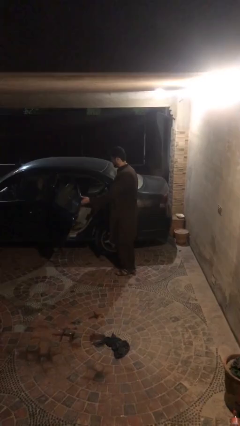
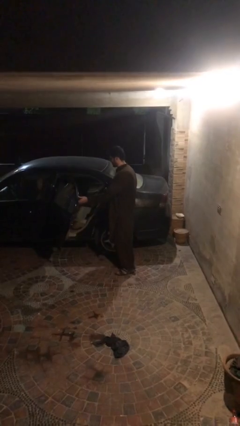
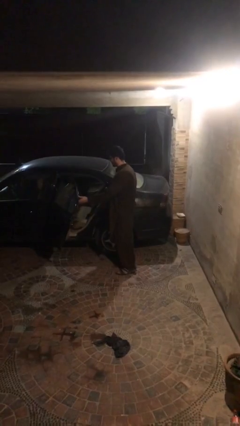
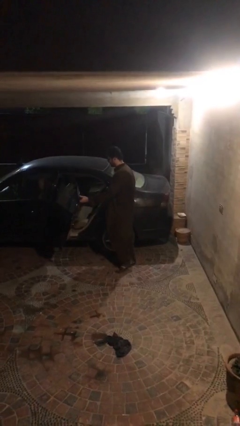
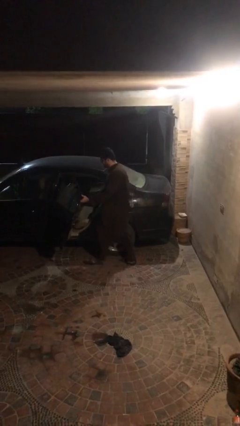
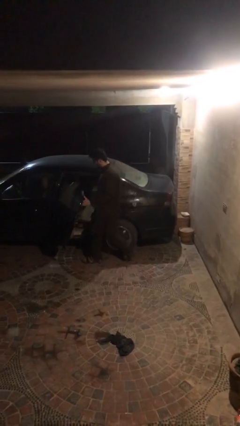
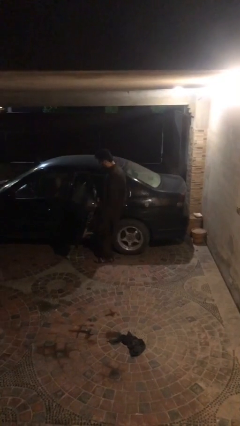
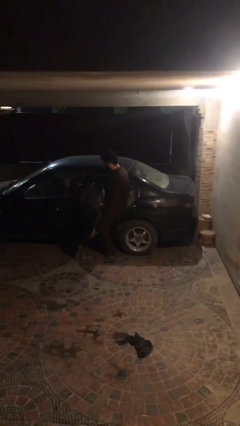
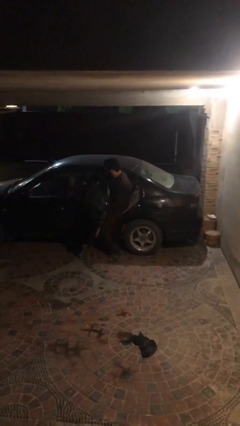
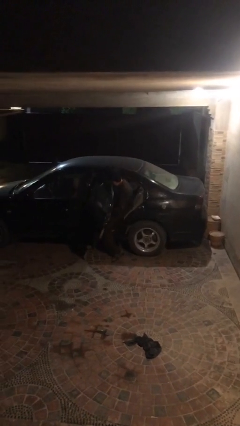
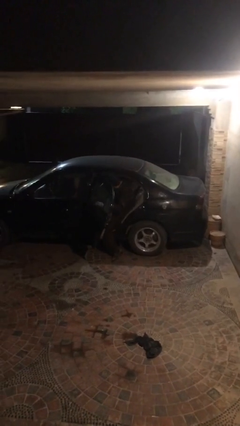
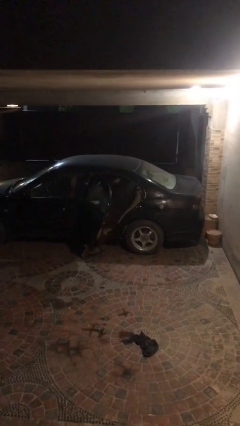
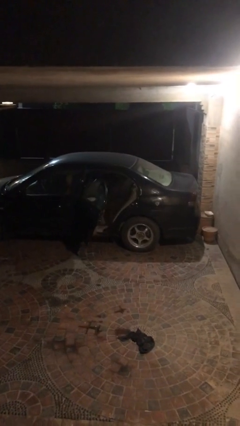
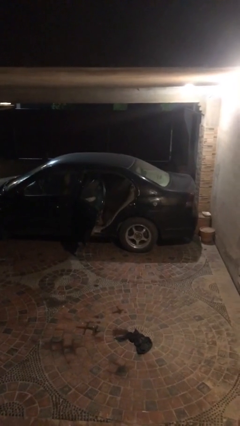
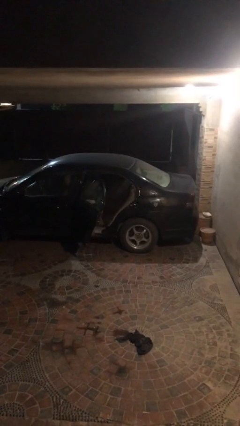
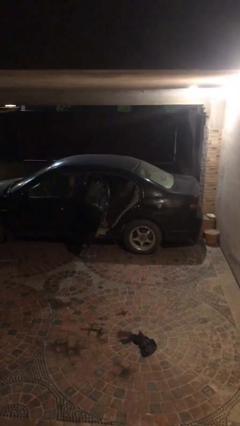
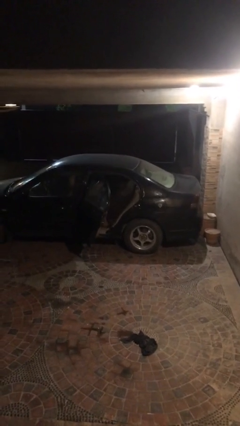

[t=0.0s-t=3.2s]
person enters car

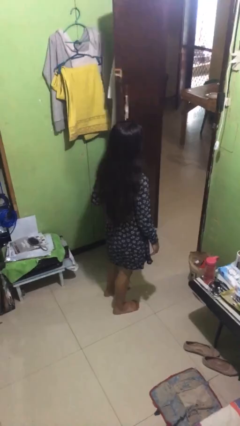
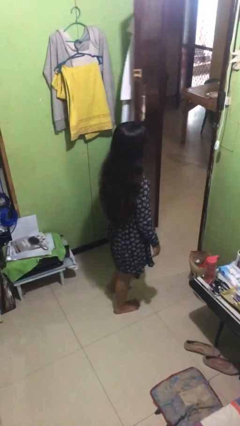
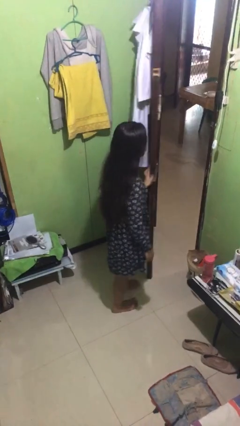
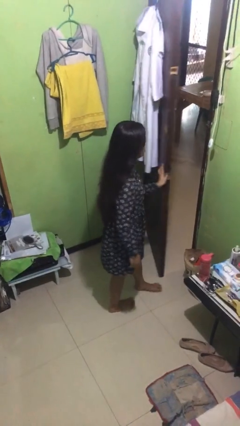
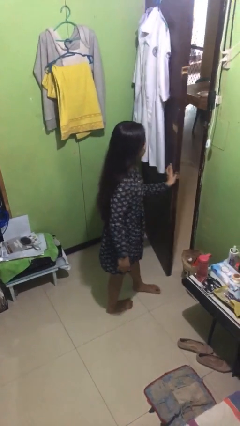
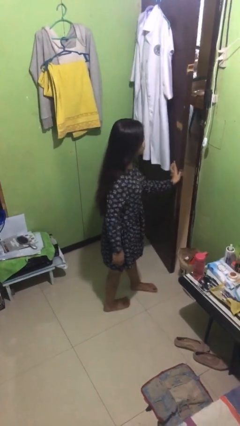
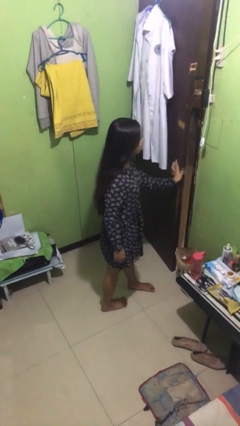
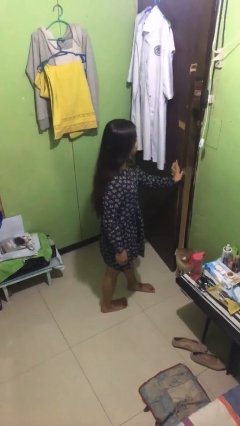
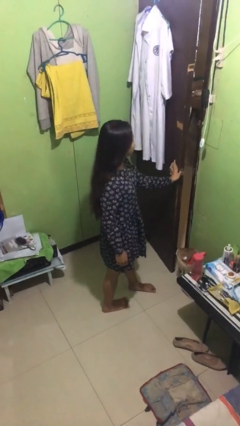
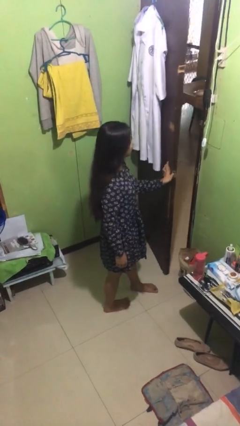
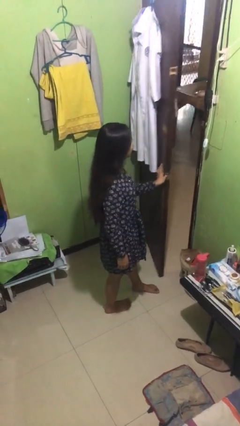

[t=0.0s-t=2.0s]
person closes facility door

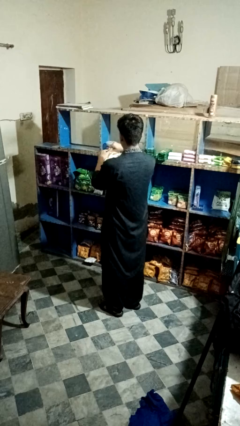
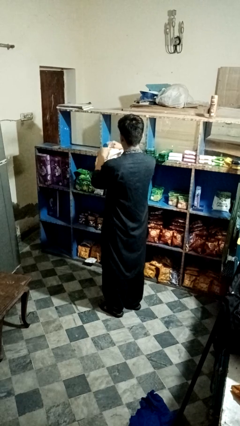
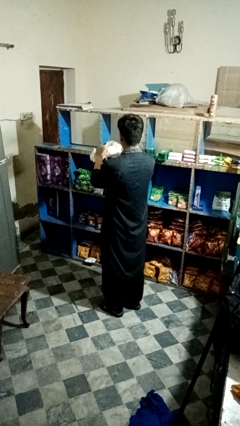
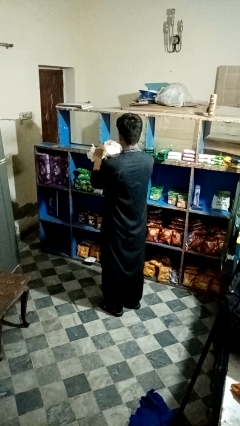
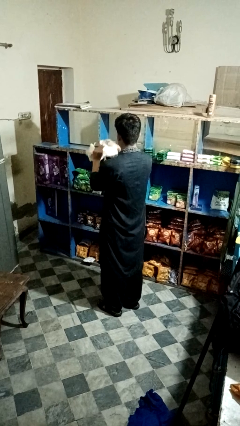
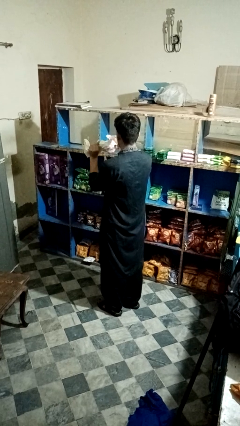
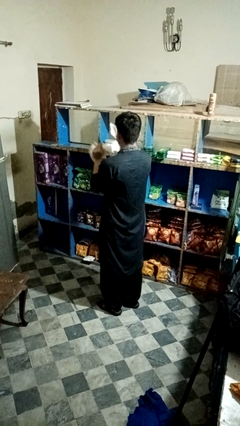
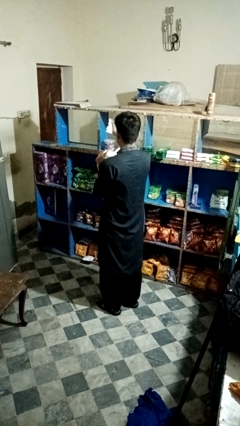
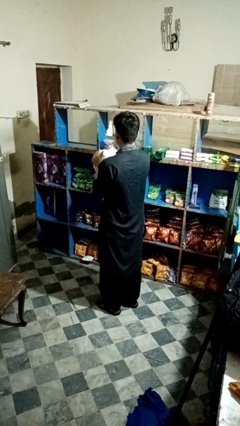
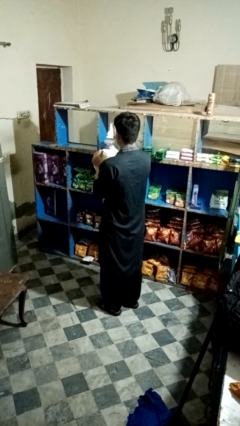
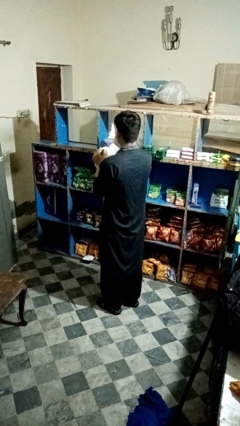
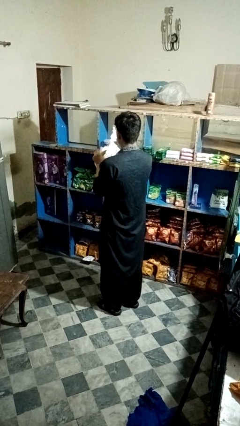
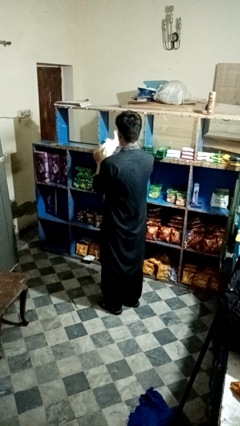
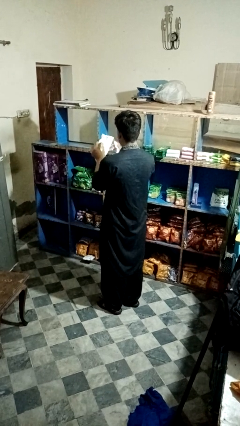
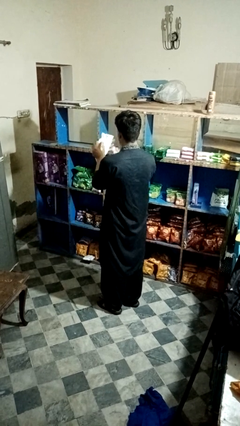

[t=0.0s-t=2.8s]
person tears paper

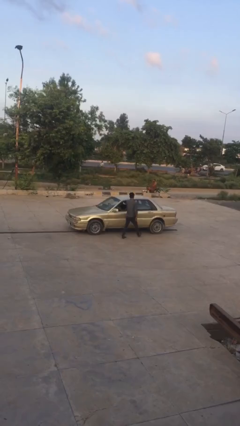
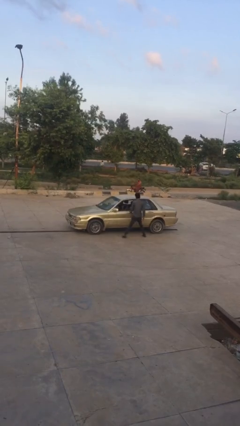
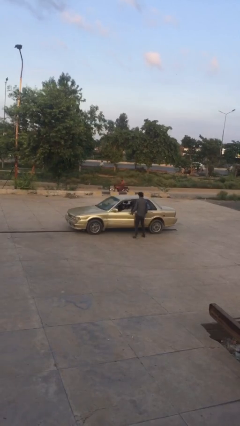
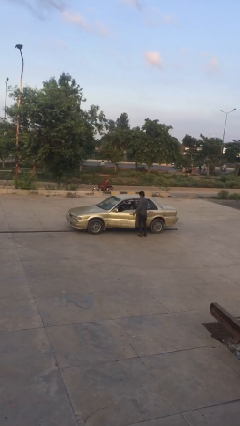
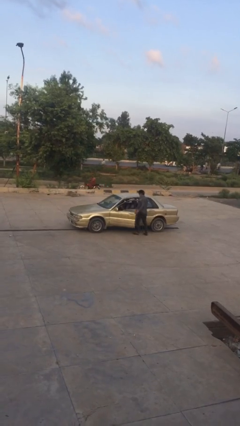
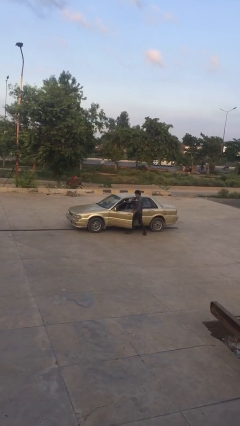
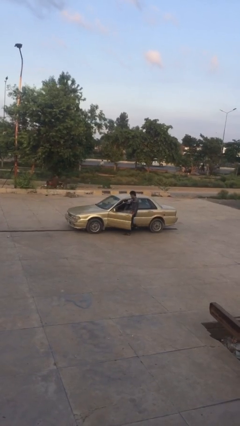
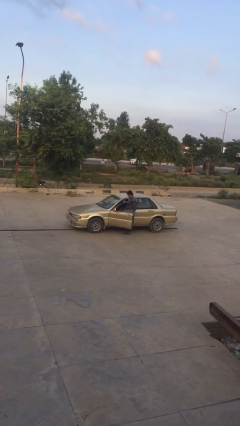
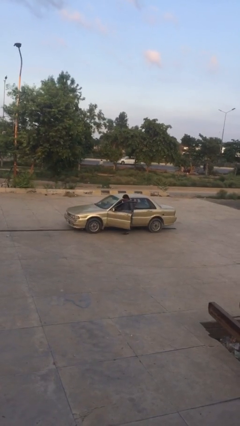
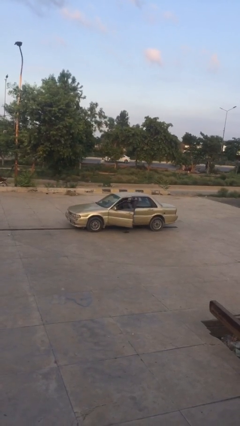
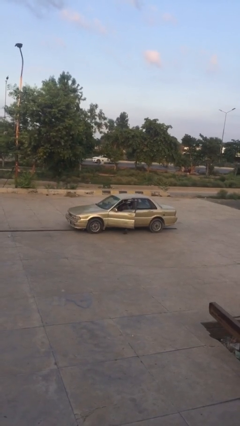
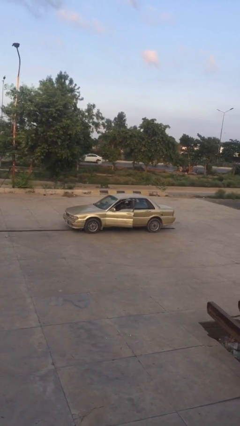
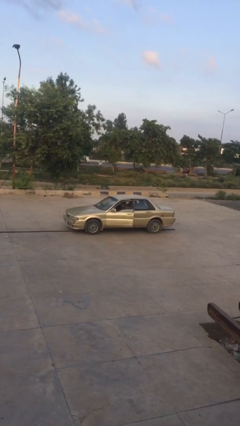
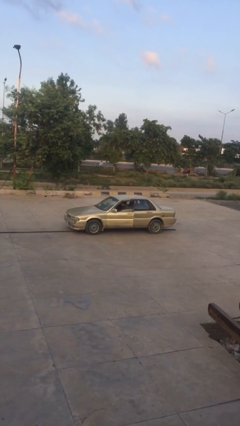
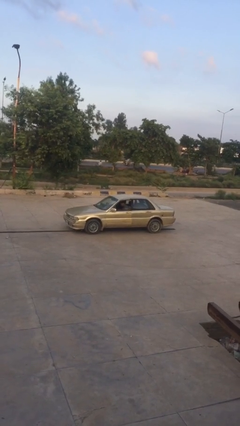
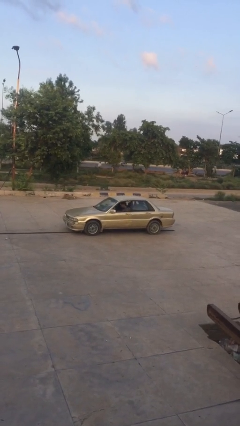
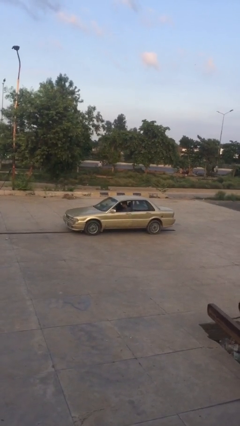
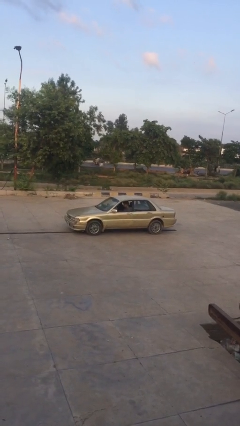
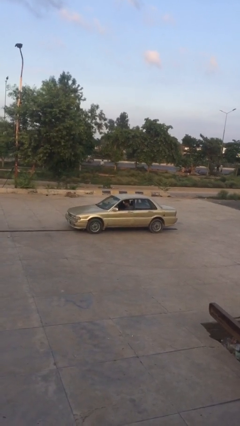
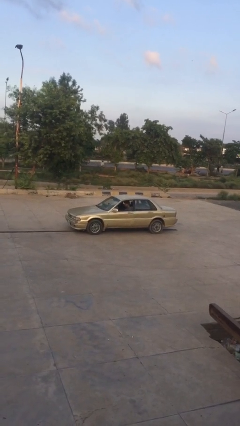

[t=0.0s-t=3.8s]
car picks up person

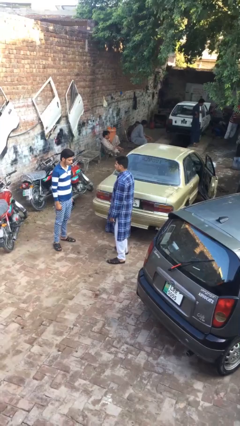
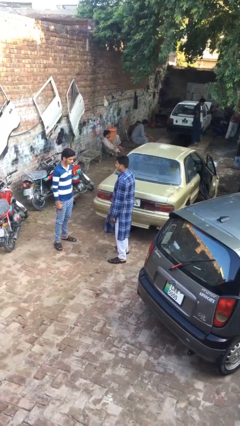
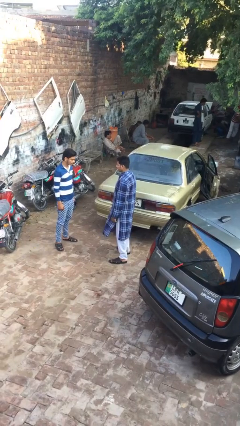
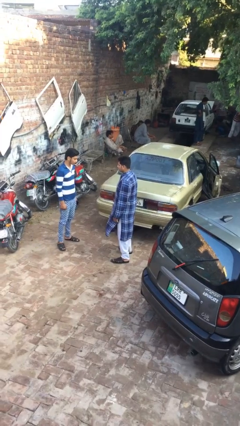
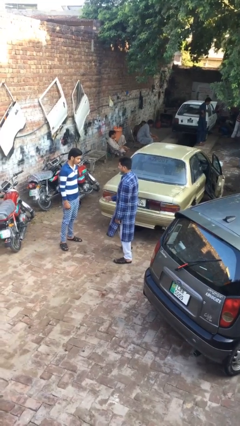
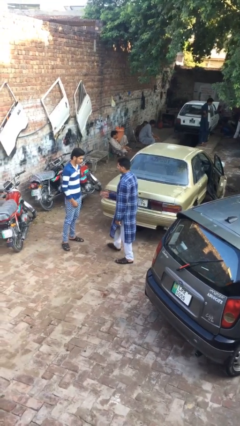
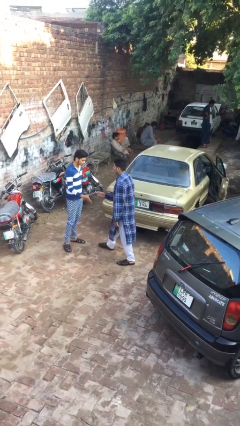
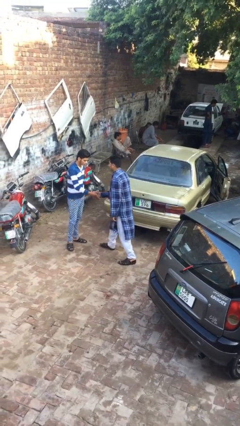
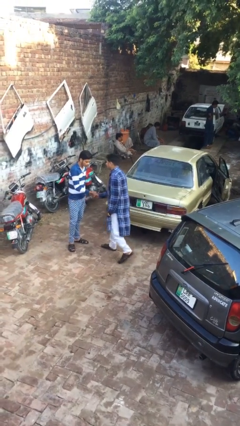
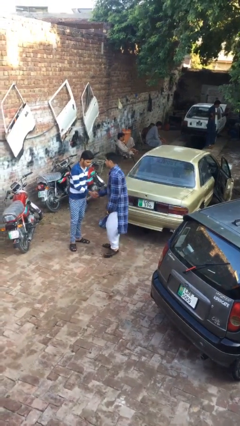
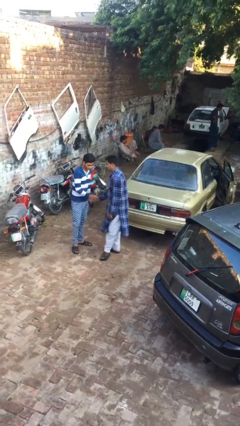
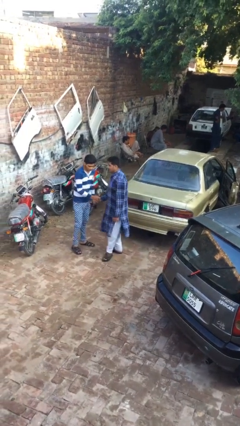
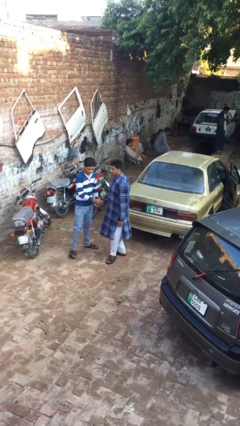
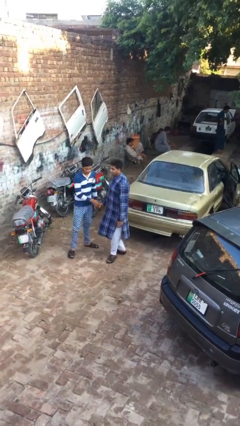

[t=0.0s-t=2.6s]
person shakes hand

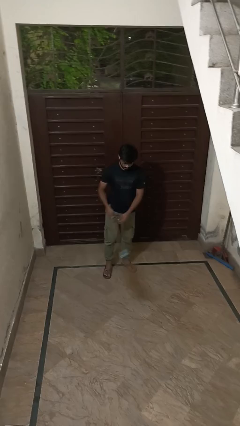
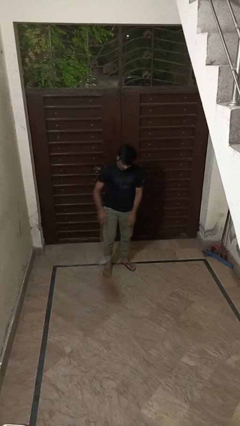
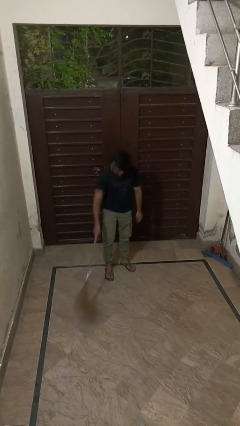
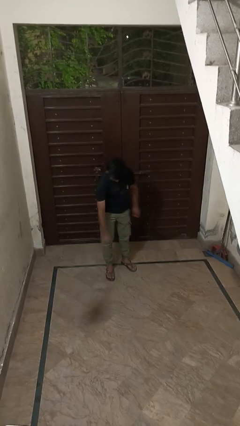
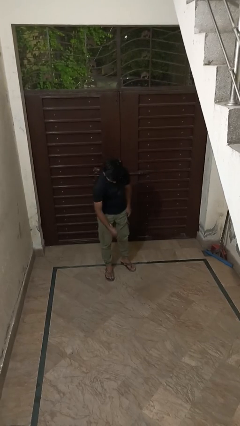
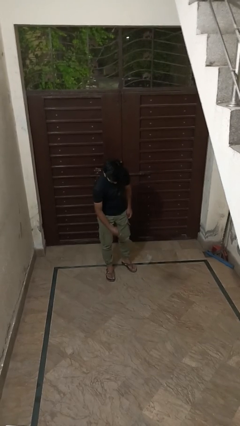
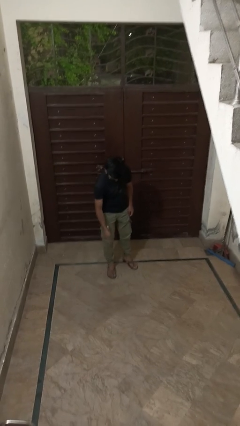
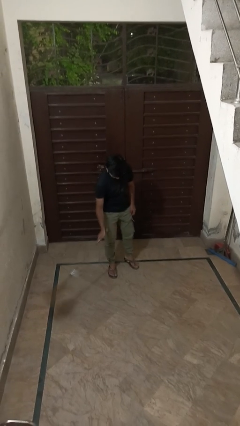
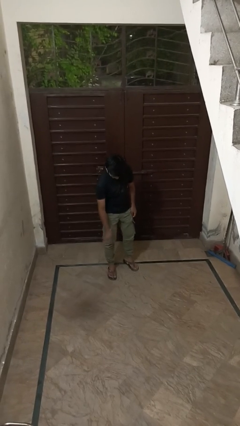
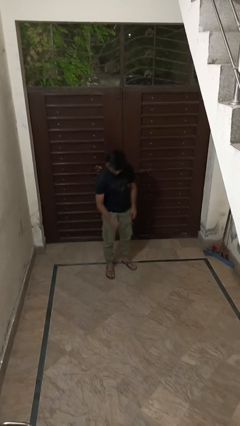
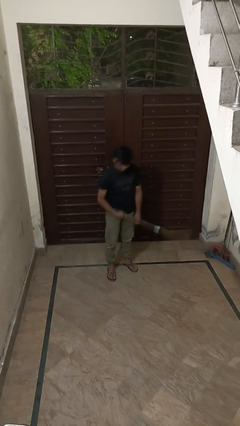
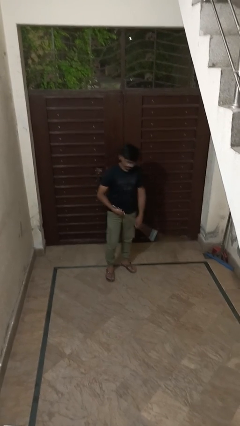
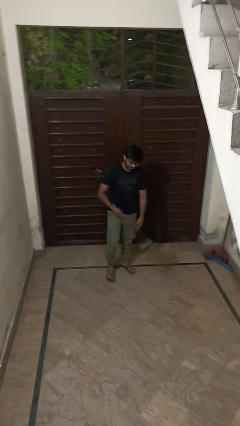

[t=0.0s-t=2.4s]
person sweeps floor

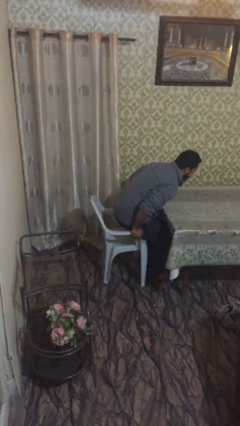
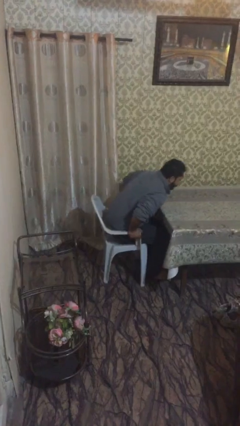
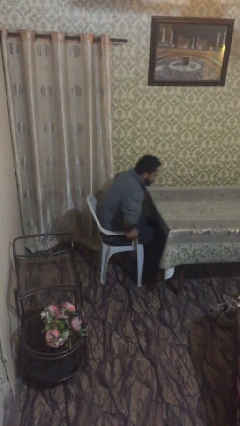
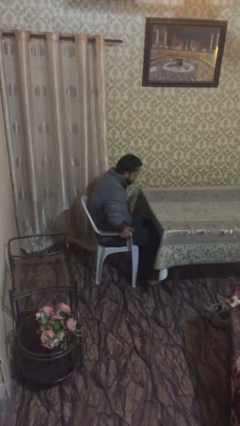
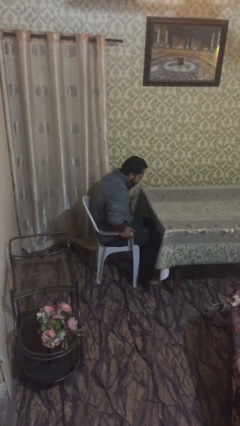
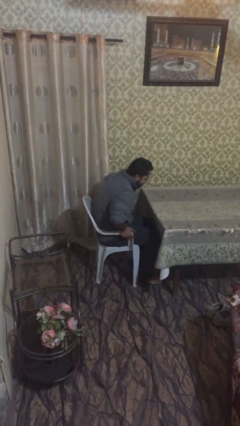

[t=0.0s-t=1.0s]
person sits down
